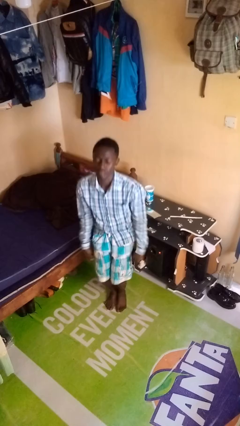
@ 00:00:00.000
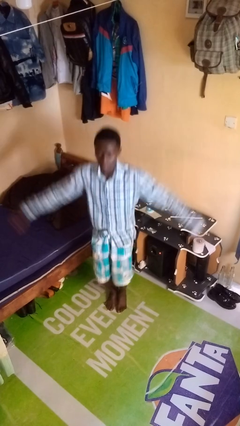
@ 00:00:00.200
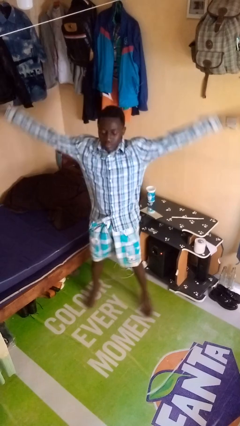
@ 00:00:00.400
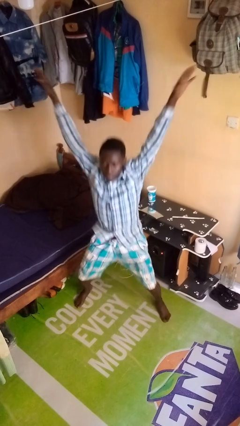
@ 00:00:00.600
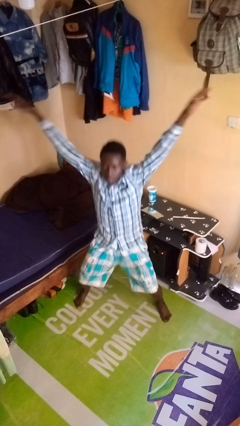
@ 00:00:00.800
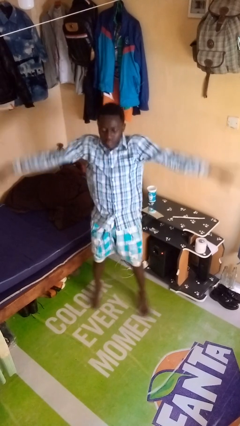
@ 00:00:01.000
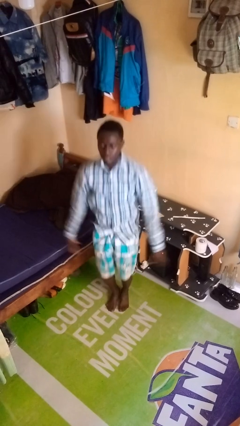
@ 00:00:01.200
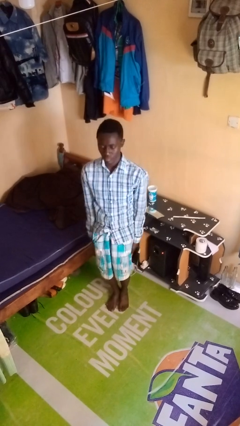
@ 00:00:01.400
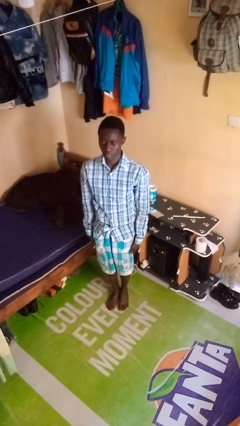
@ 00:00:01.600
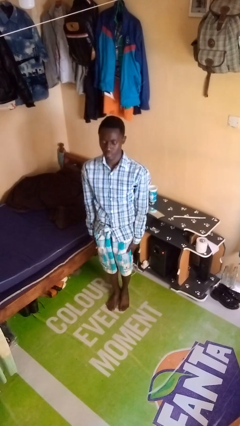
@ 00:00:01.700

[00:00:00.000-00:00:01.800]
person exercises with jumping jacks

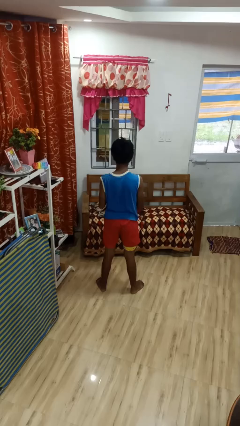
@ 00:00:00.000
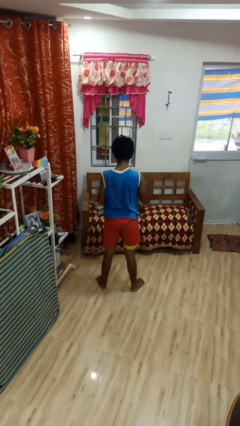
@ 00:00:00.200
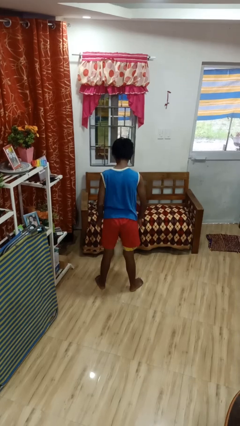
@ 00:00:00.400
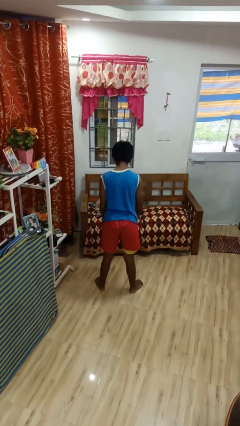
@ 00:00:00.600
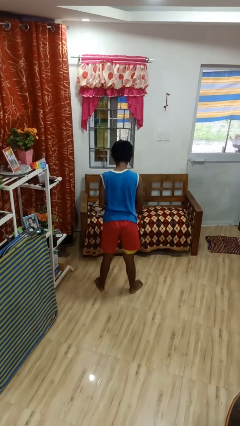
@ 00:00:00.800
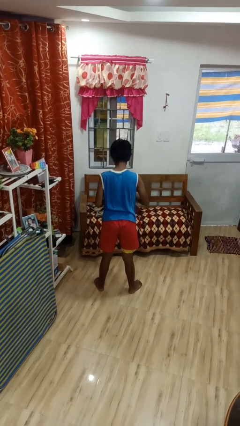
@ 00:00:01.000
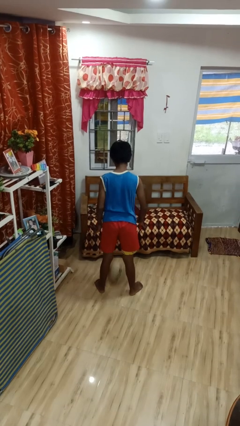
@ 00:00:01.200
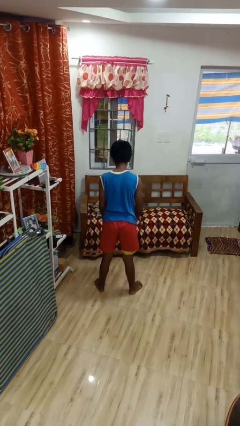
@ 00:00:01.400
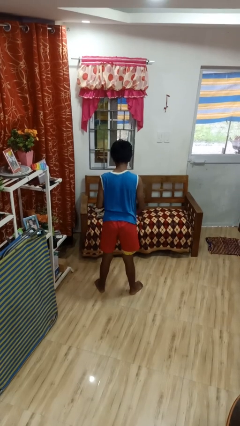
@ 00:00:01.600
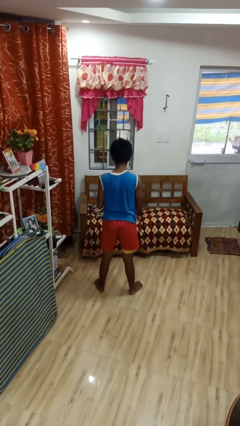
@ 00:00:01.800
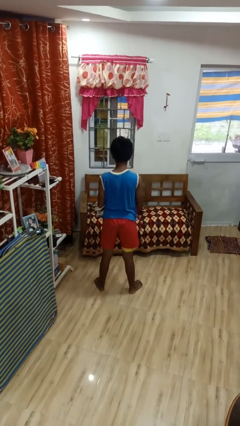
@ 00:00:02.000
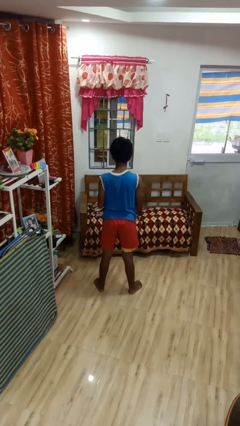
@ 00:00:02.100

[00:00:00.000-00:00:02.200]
person bounces ball on floor

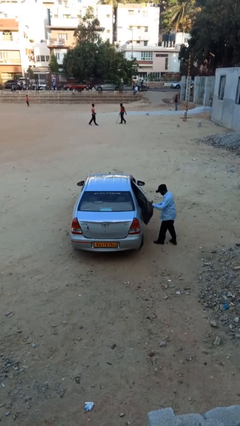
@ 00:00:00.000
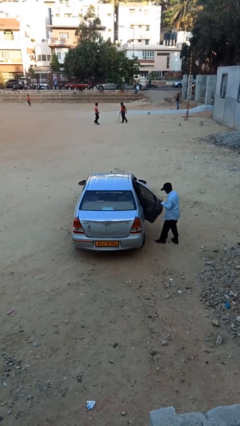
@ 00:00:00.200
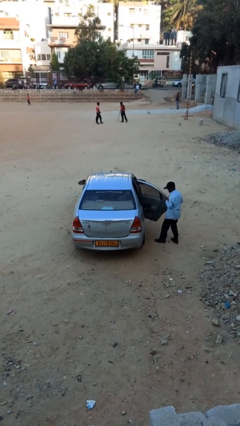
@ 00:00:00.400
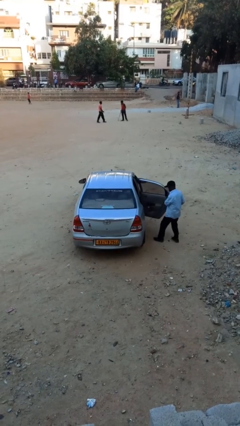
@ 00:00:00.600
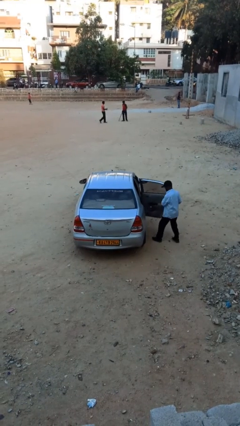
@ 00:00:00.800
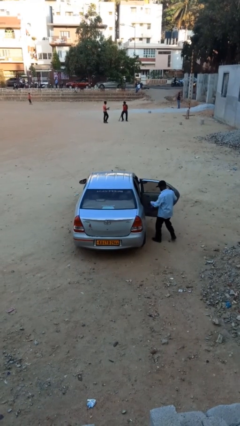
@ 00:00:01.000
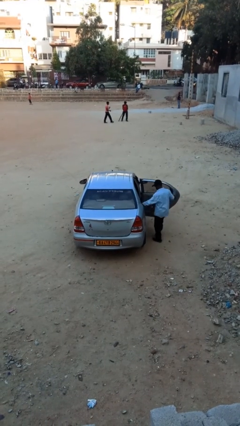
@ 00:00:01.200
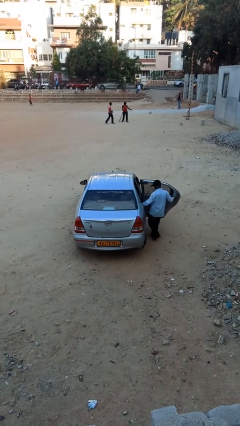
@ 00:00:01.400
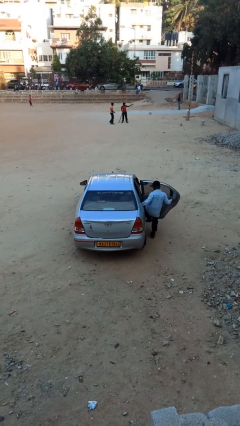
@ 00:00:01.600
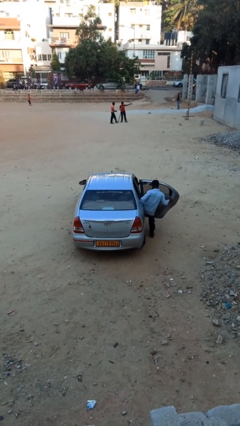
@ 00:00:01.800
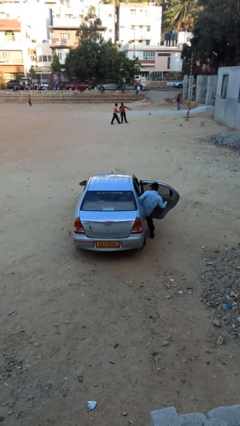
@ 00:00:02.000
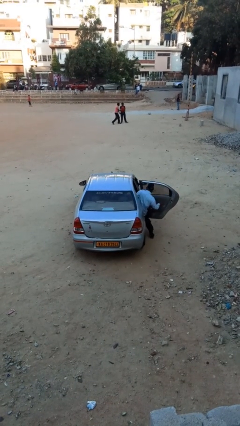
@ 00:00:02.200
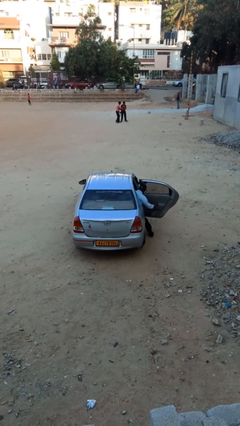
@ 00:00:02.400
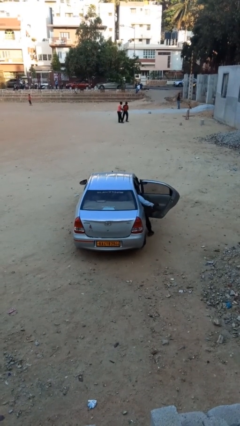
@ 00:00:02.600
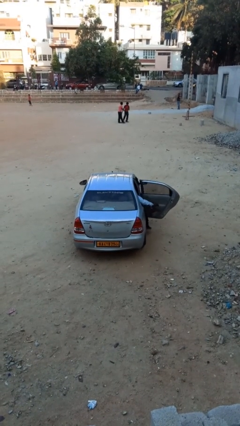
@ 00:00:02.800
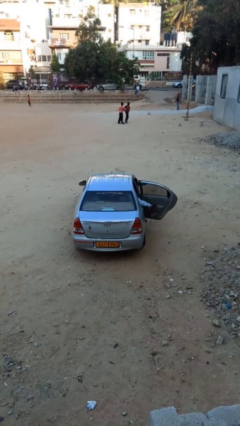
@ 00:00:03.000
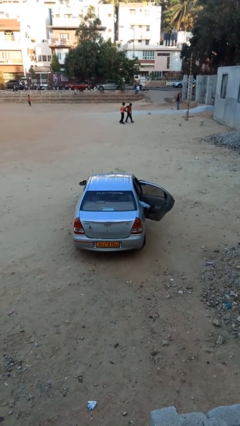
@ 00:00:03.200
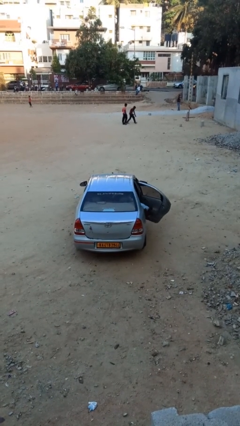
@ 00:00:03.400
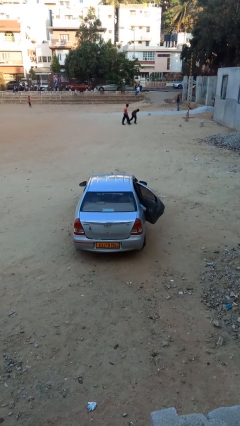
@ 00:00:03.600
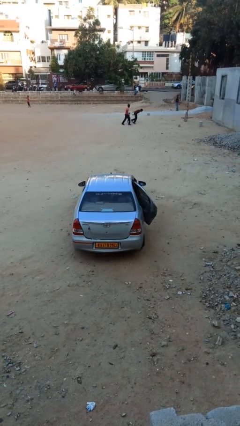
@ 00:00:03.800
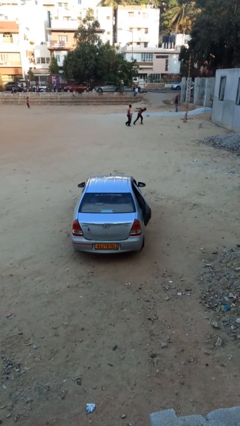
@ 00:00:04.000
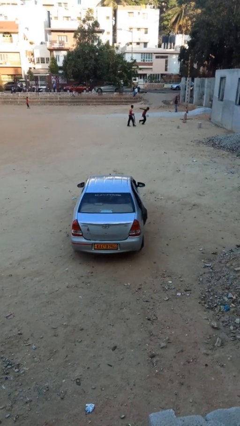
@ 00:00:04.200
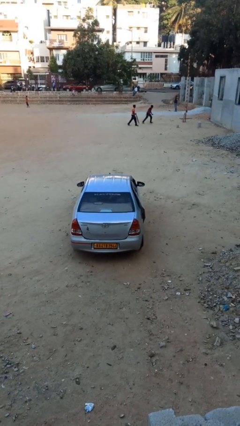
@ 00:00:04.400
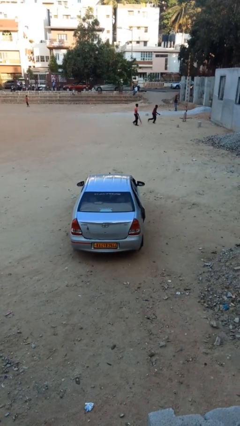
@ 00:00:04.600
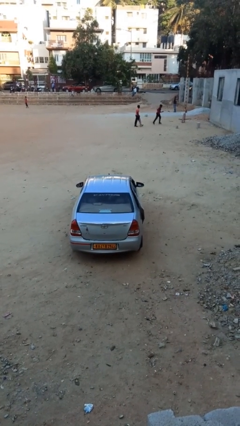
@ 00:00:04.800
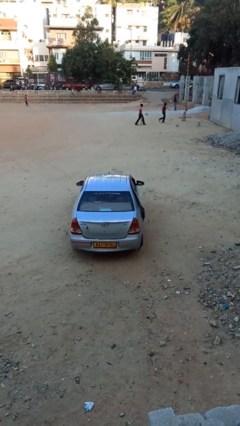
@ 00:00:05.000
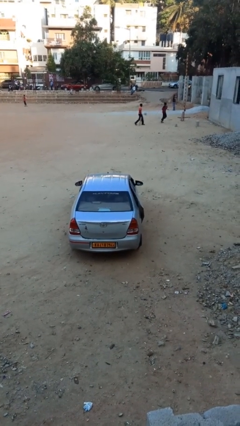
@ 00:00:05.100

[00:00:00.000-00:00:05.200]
car picks up person

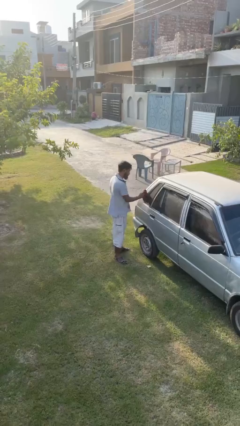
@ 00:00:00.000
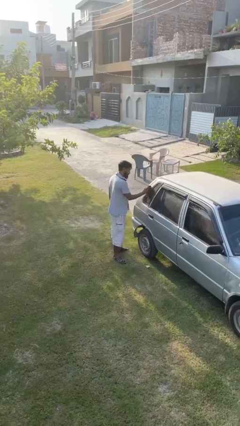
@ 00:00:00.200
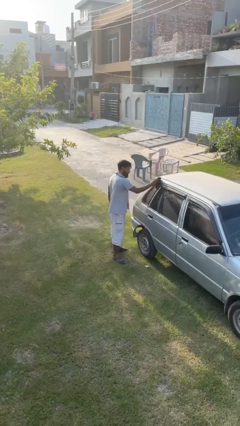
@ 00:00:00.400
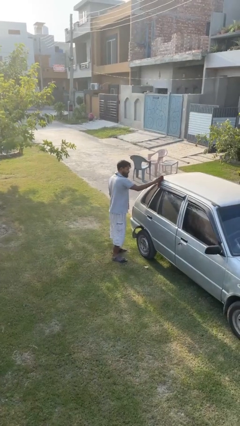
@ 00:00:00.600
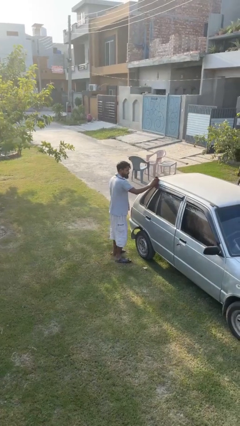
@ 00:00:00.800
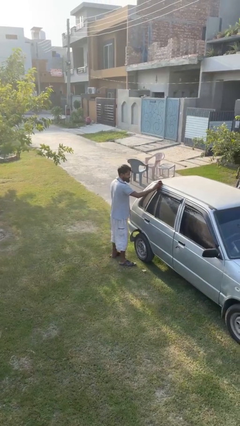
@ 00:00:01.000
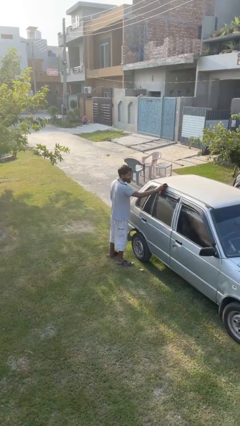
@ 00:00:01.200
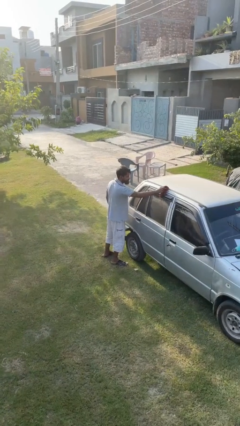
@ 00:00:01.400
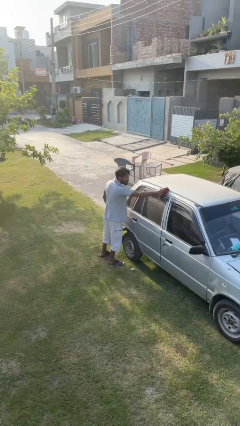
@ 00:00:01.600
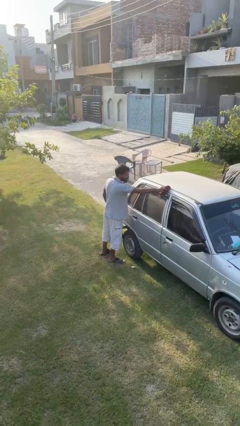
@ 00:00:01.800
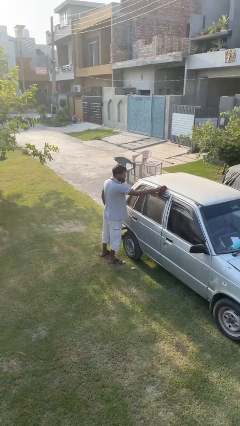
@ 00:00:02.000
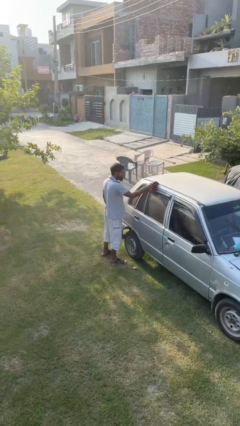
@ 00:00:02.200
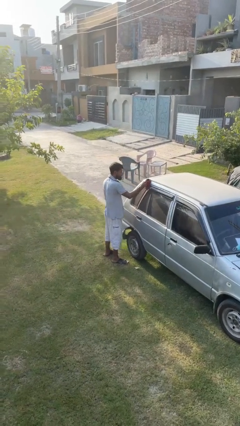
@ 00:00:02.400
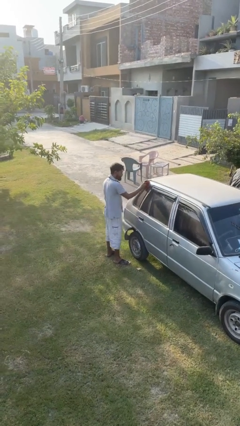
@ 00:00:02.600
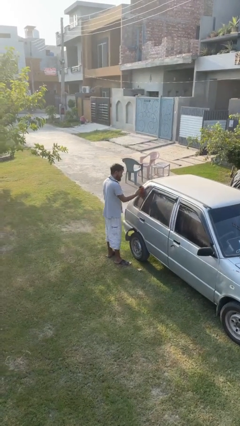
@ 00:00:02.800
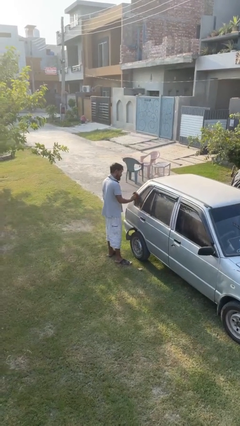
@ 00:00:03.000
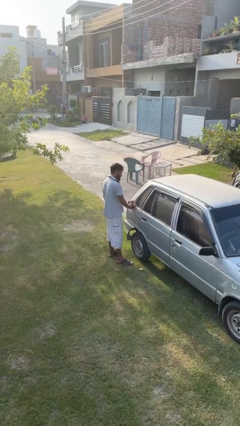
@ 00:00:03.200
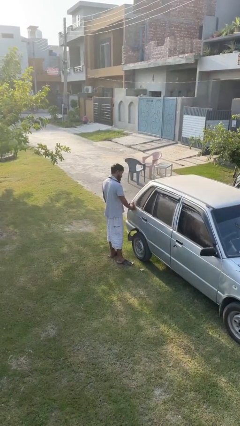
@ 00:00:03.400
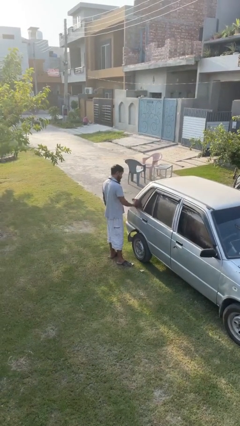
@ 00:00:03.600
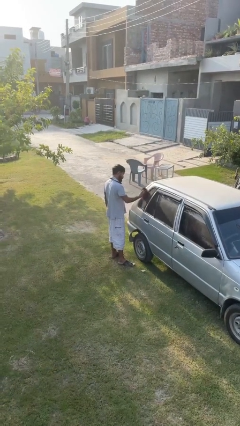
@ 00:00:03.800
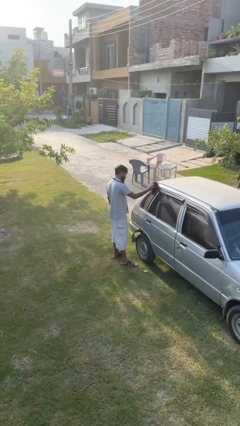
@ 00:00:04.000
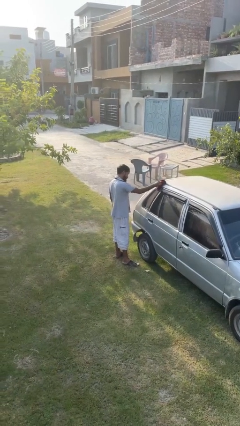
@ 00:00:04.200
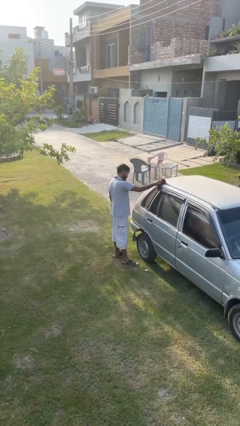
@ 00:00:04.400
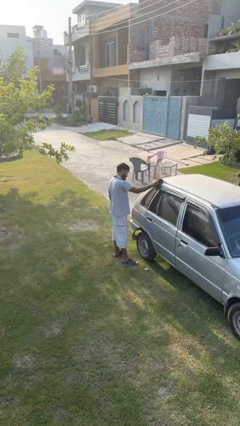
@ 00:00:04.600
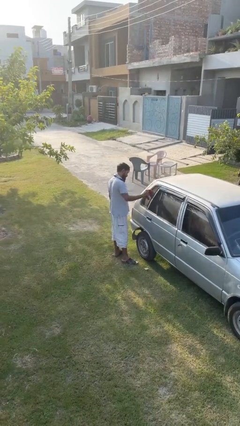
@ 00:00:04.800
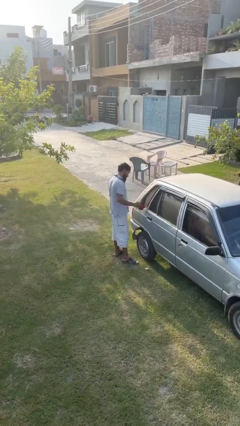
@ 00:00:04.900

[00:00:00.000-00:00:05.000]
person polishes car with rag

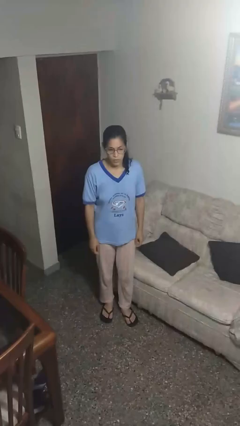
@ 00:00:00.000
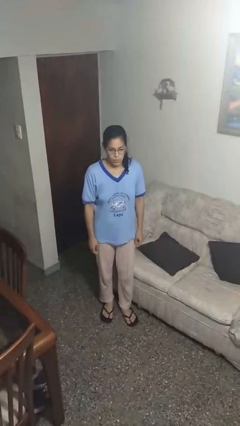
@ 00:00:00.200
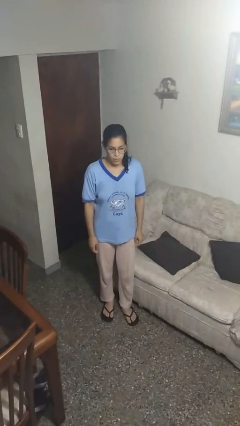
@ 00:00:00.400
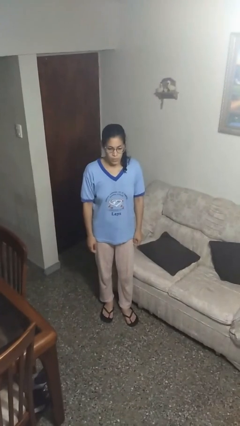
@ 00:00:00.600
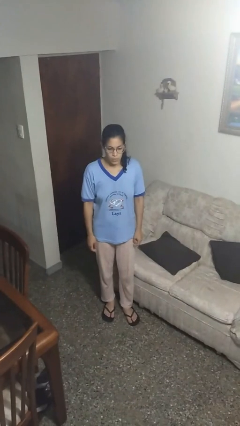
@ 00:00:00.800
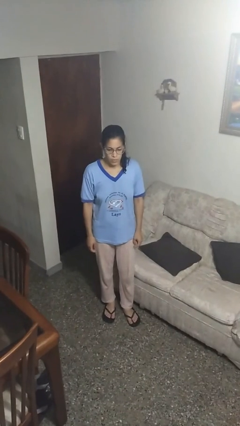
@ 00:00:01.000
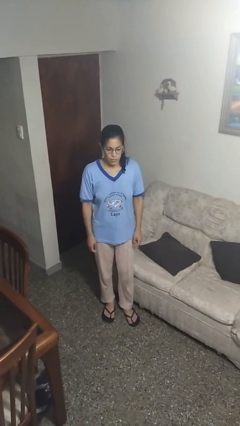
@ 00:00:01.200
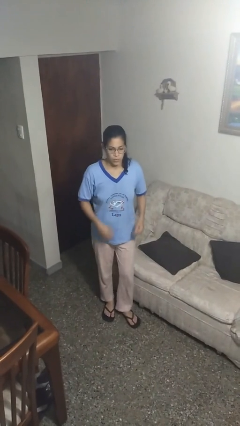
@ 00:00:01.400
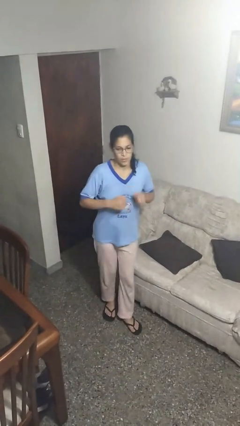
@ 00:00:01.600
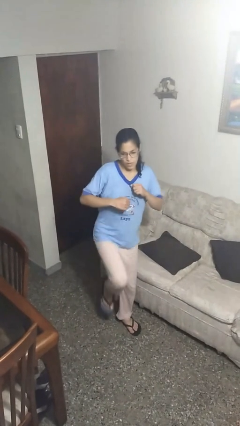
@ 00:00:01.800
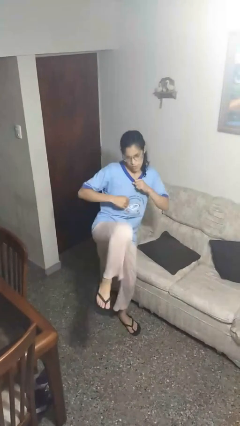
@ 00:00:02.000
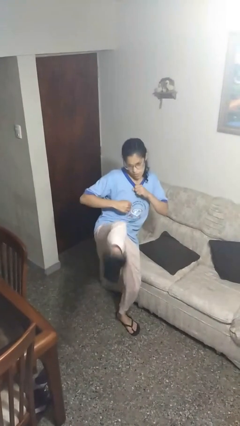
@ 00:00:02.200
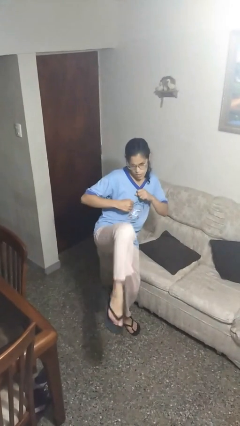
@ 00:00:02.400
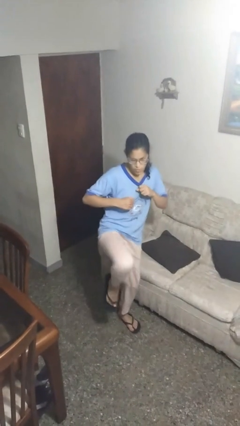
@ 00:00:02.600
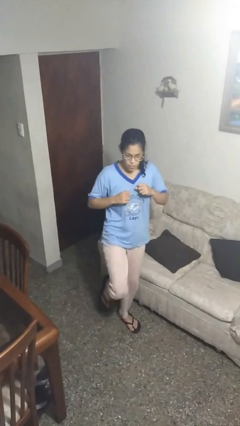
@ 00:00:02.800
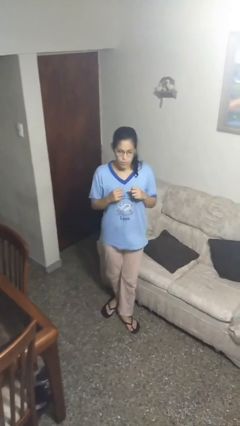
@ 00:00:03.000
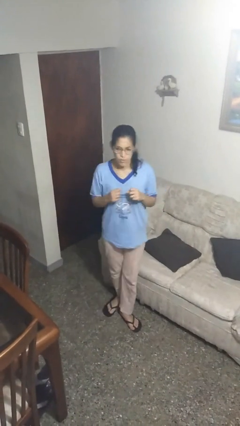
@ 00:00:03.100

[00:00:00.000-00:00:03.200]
person karate kicks
